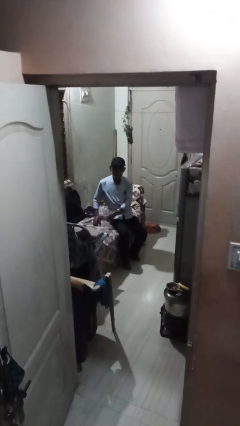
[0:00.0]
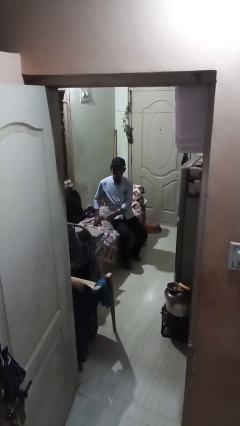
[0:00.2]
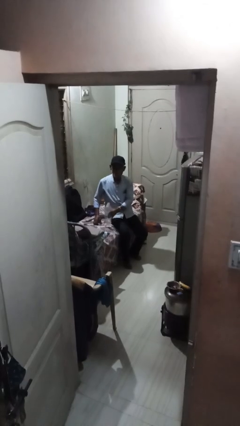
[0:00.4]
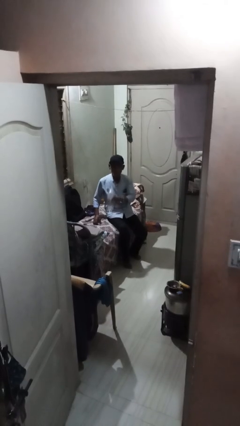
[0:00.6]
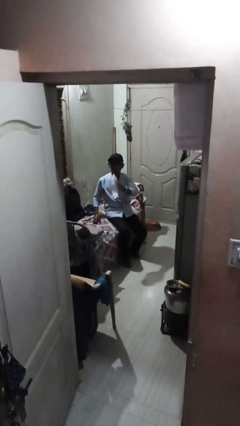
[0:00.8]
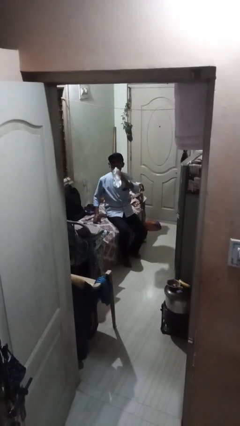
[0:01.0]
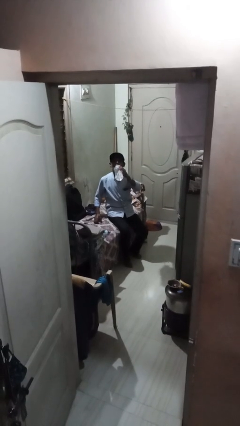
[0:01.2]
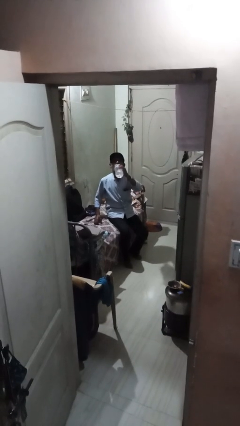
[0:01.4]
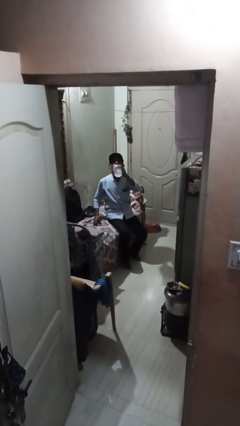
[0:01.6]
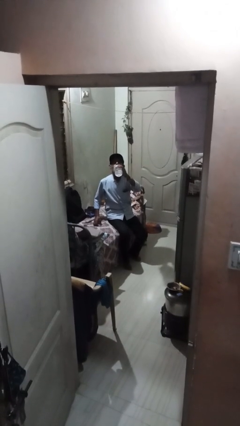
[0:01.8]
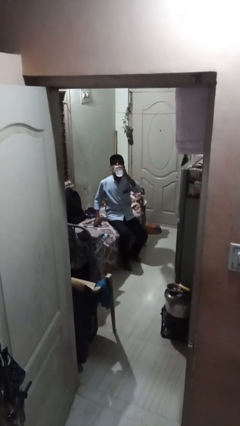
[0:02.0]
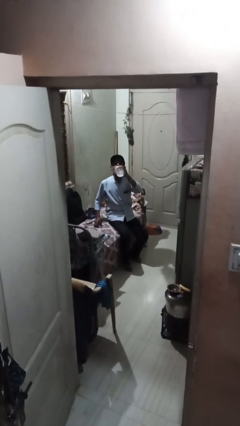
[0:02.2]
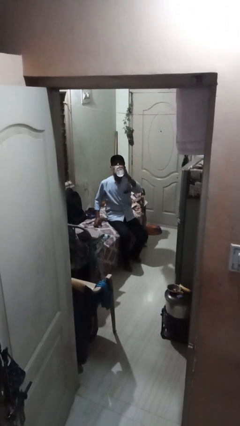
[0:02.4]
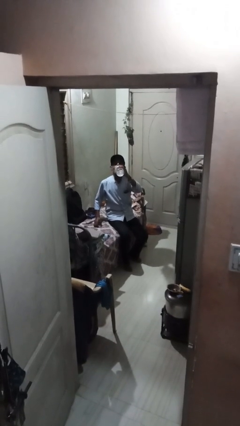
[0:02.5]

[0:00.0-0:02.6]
person drinks from bottle

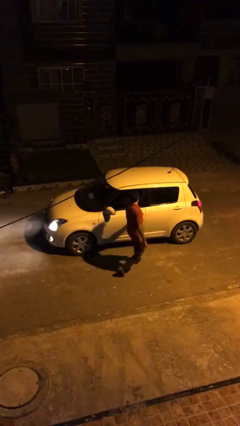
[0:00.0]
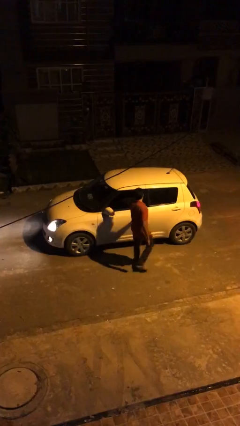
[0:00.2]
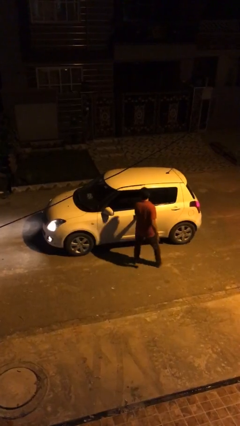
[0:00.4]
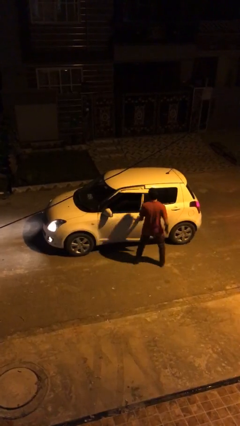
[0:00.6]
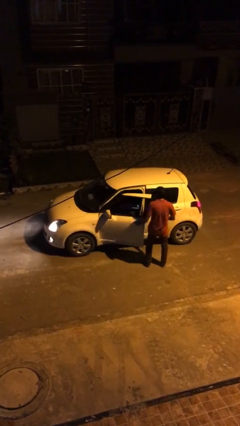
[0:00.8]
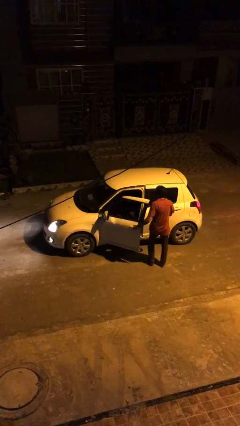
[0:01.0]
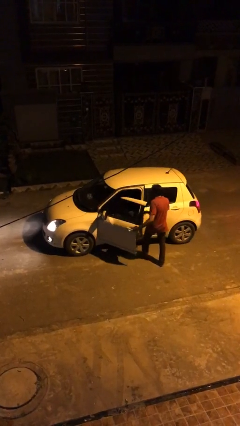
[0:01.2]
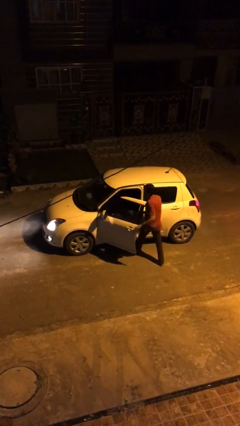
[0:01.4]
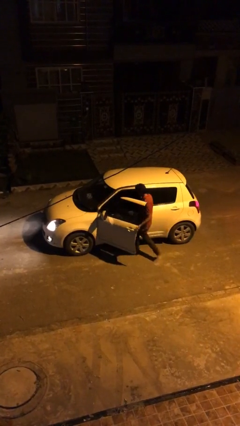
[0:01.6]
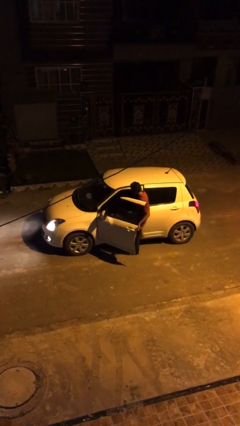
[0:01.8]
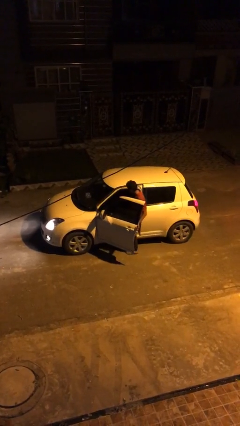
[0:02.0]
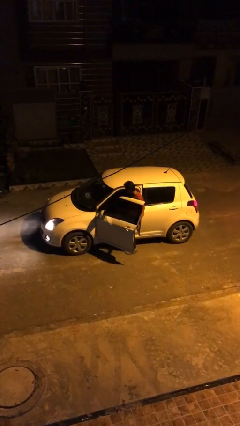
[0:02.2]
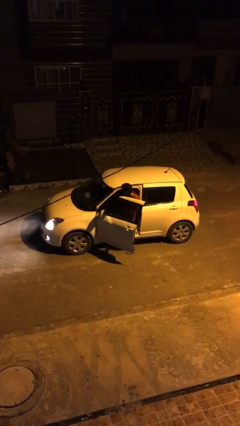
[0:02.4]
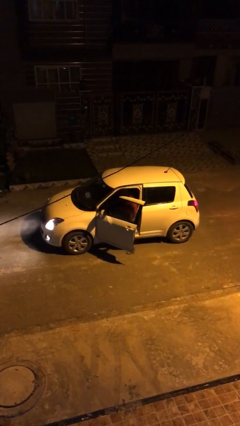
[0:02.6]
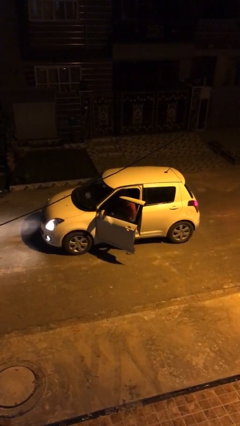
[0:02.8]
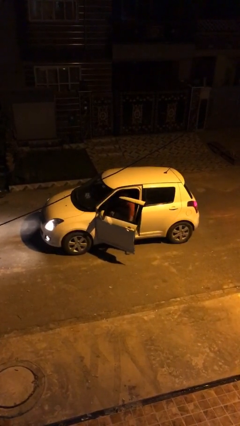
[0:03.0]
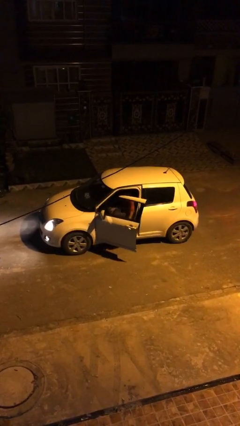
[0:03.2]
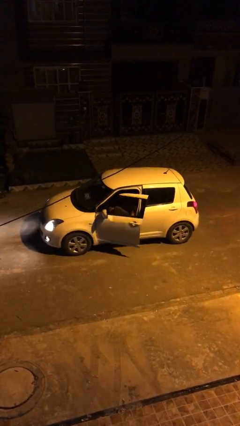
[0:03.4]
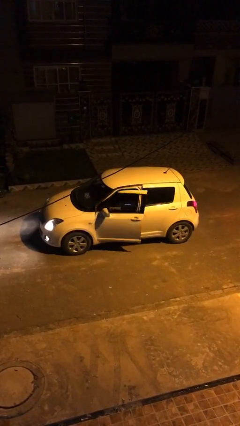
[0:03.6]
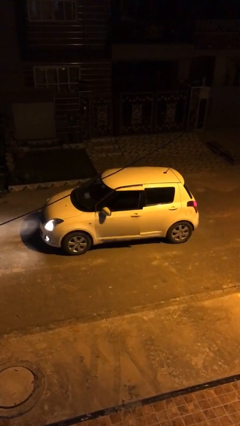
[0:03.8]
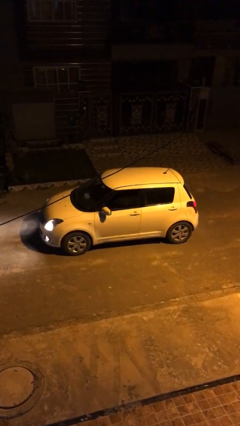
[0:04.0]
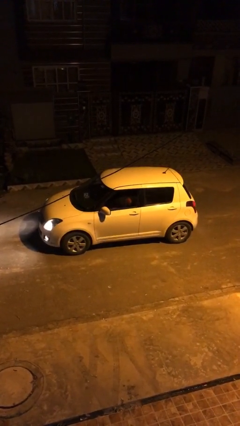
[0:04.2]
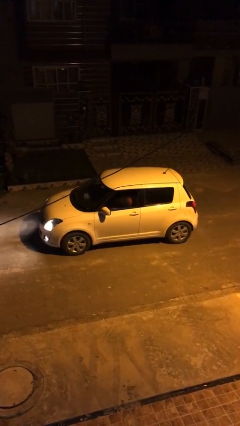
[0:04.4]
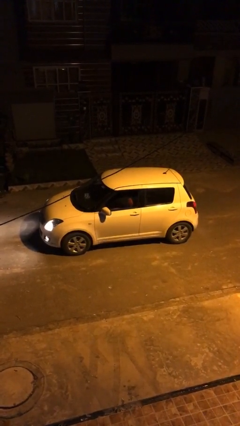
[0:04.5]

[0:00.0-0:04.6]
car picks up person

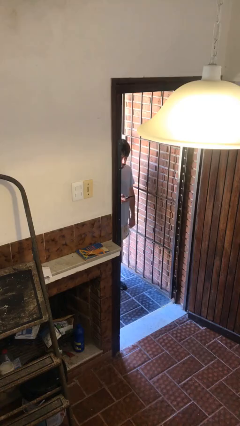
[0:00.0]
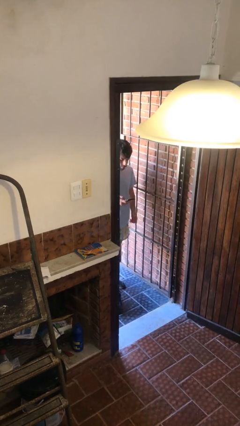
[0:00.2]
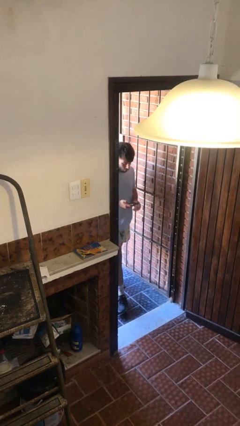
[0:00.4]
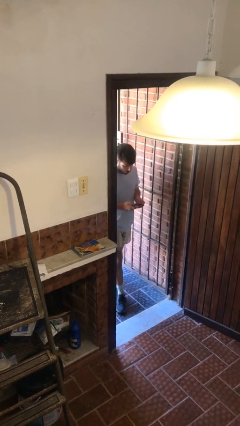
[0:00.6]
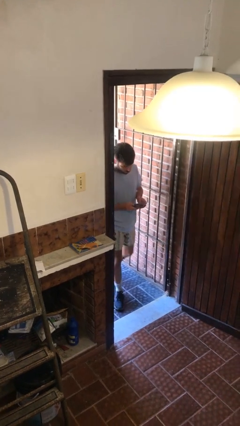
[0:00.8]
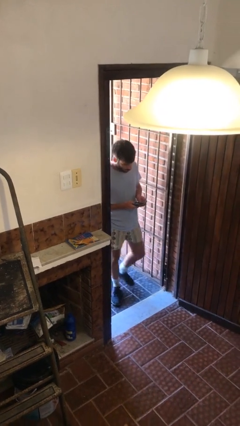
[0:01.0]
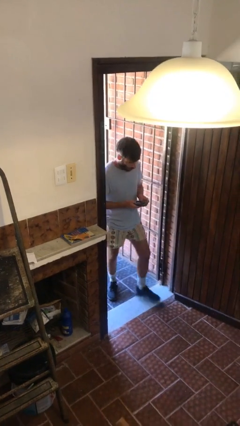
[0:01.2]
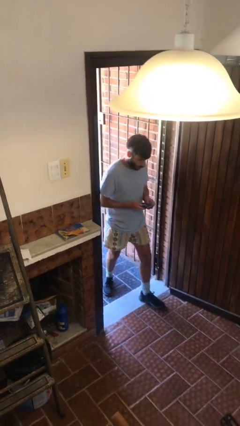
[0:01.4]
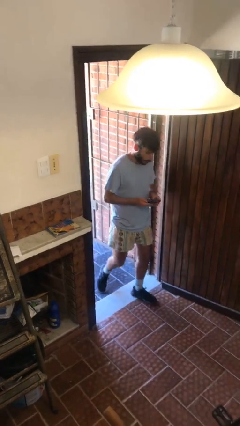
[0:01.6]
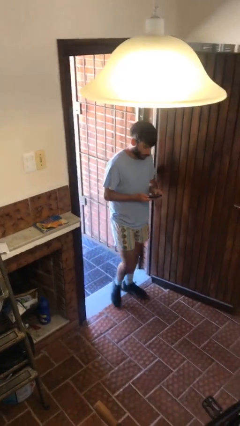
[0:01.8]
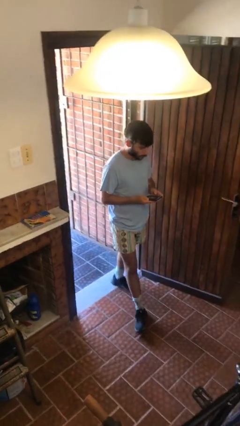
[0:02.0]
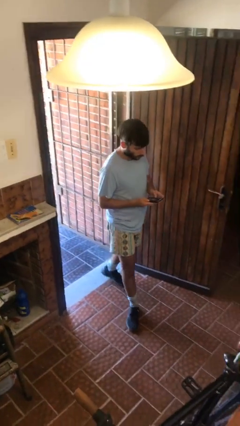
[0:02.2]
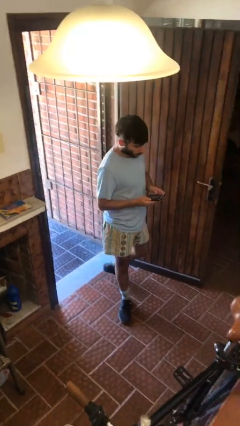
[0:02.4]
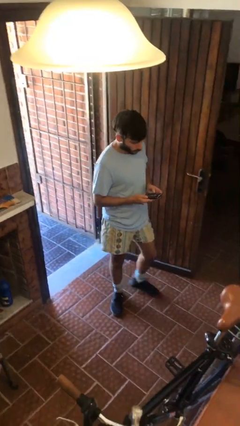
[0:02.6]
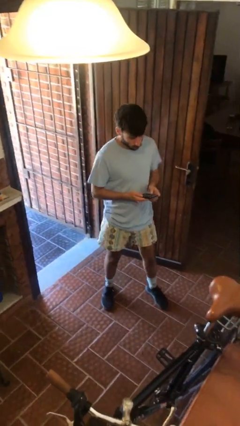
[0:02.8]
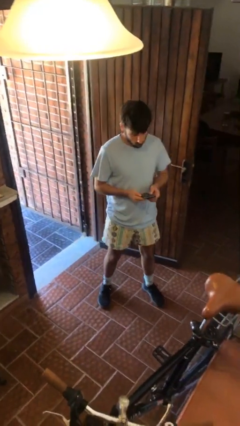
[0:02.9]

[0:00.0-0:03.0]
person enters scene through structure

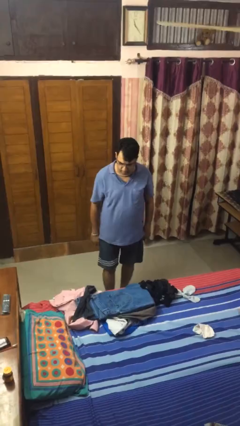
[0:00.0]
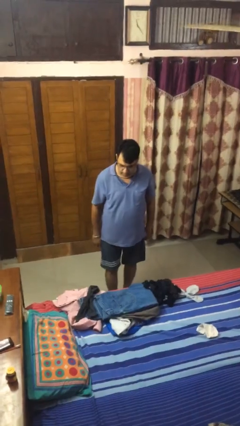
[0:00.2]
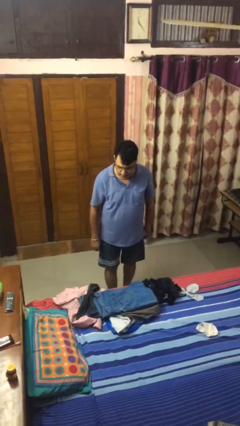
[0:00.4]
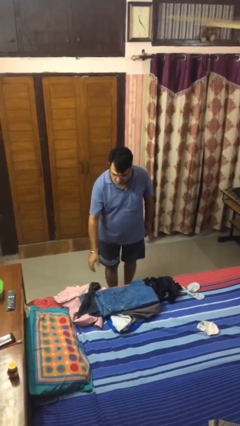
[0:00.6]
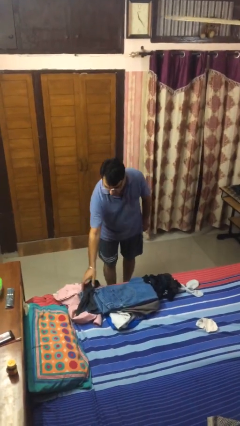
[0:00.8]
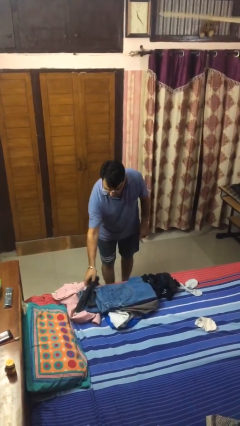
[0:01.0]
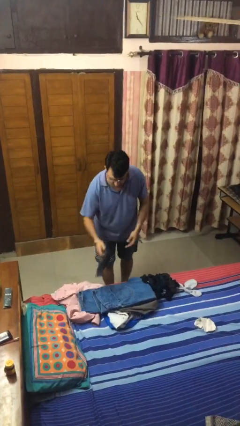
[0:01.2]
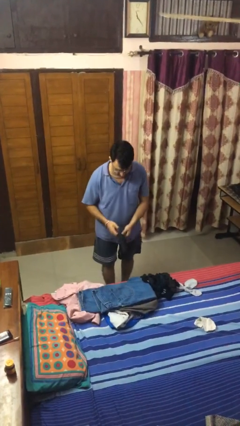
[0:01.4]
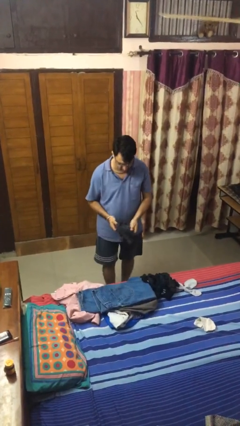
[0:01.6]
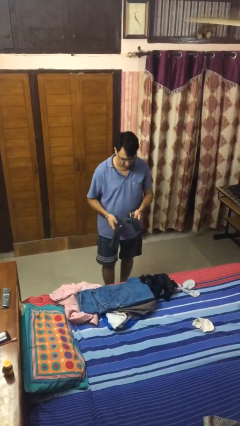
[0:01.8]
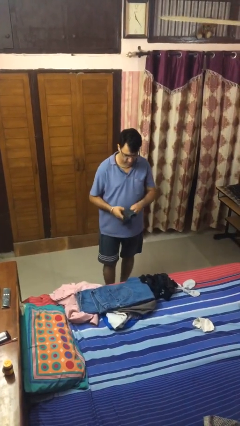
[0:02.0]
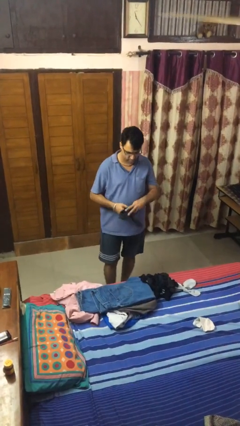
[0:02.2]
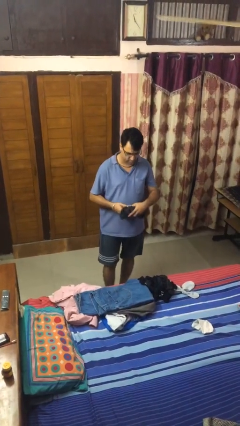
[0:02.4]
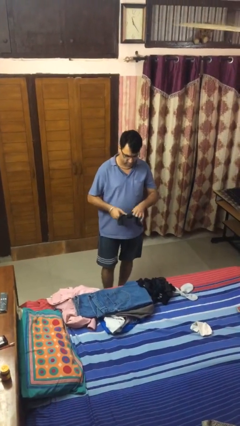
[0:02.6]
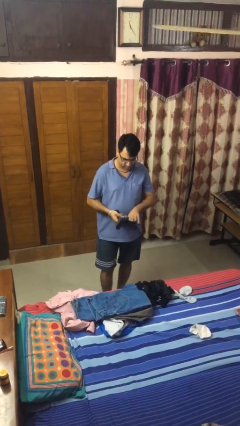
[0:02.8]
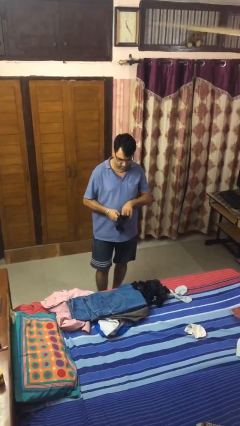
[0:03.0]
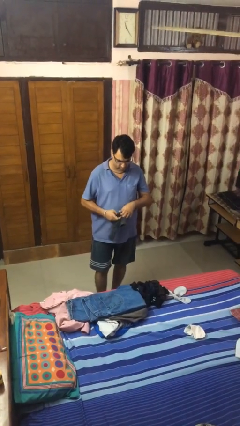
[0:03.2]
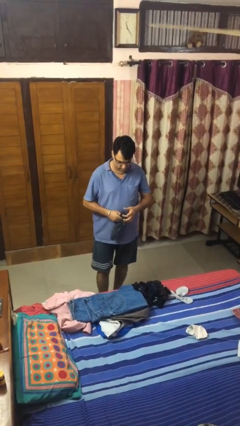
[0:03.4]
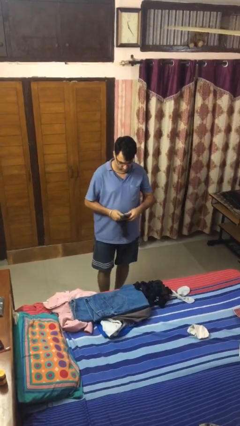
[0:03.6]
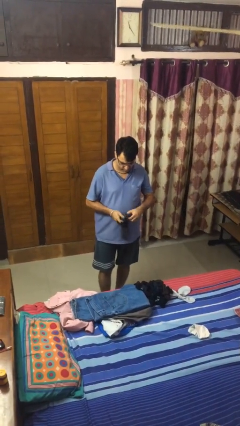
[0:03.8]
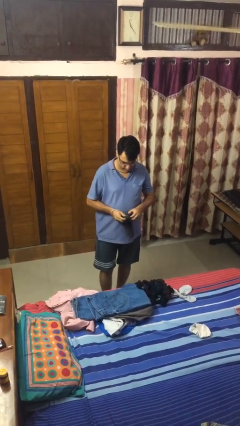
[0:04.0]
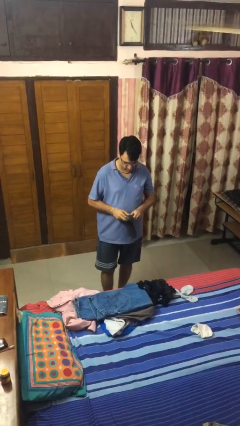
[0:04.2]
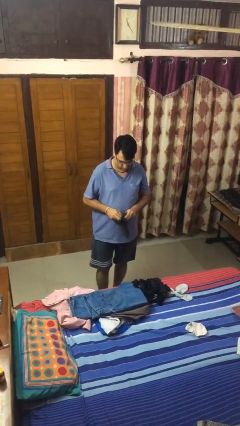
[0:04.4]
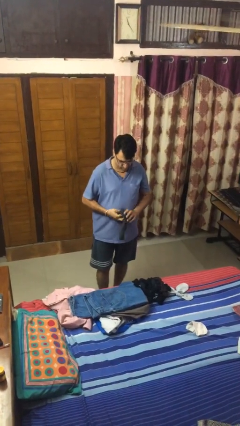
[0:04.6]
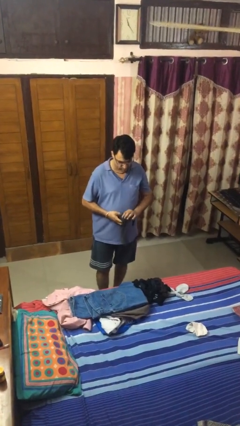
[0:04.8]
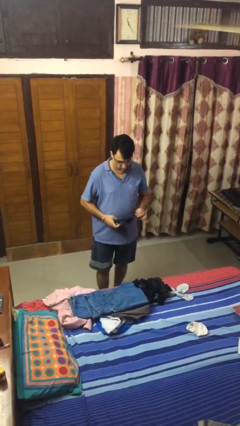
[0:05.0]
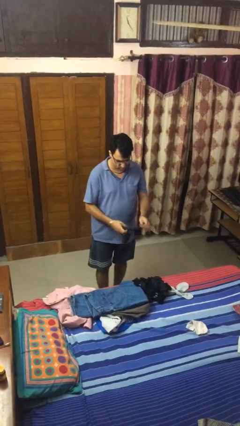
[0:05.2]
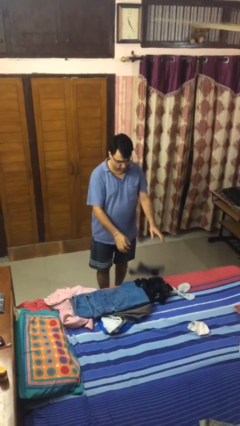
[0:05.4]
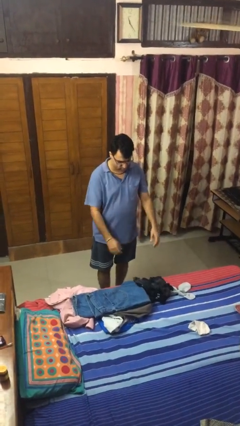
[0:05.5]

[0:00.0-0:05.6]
person folds socks

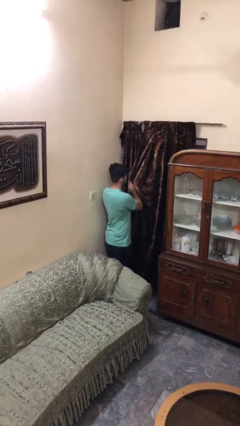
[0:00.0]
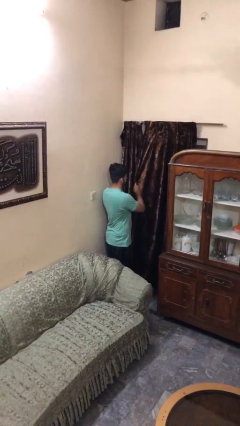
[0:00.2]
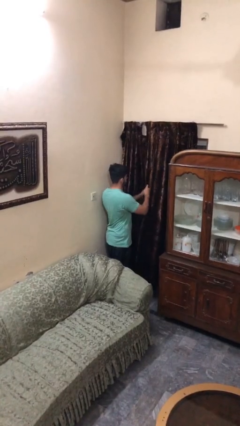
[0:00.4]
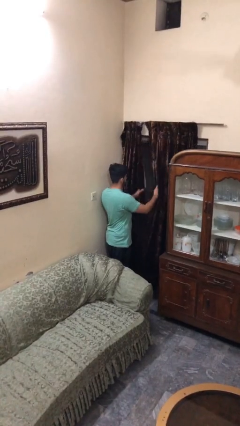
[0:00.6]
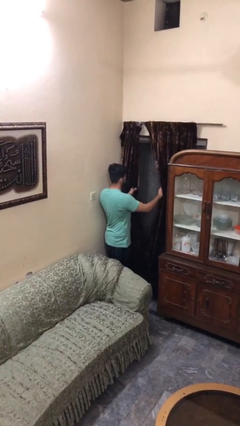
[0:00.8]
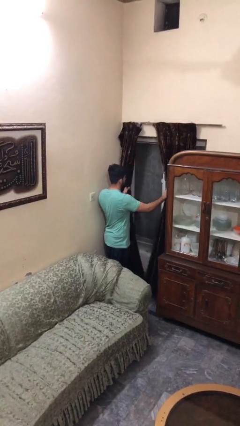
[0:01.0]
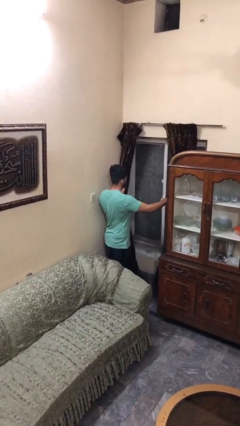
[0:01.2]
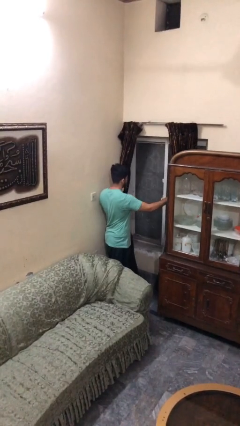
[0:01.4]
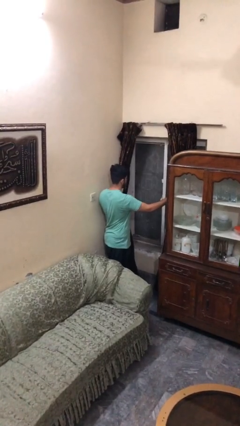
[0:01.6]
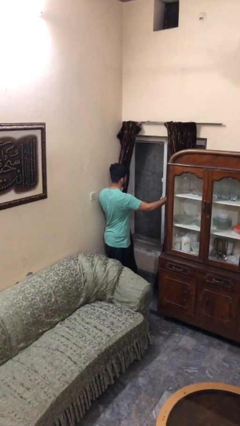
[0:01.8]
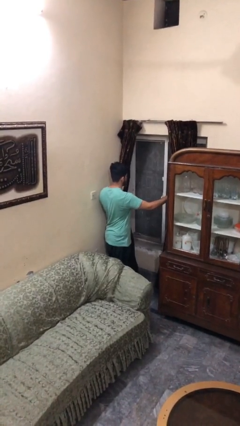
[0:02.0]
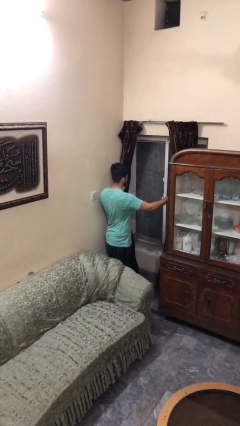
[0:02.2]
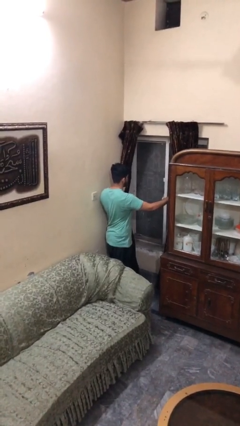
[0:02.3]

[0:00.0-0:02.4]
person opens curtains
